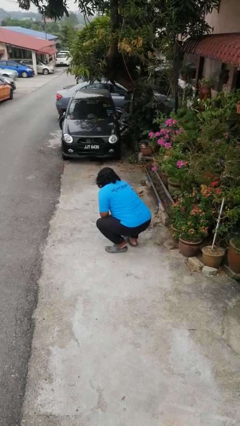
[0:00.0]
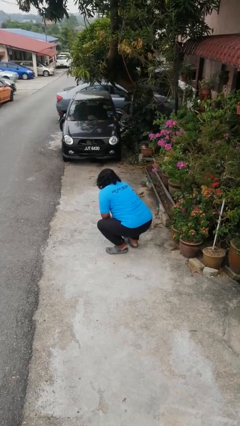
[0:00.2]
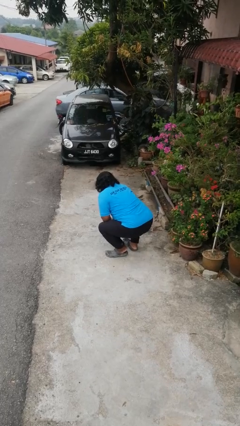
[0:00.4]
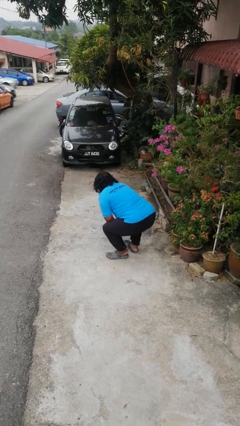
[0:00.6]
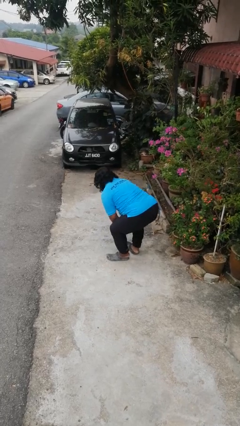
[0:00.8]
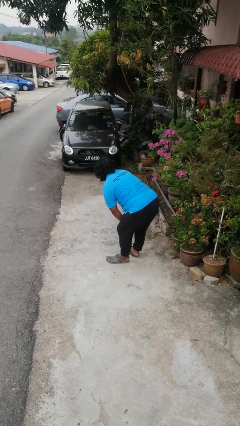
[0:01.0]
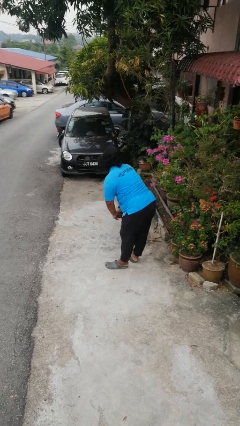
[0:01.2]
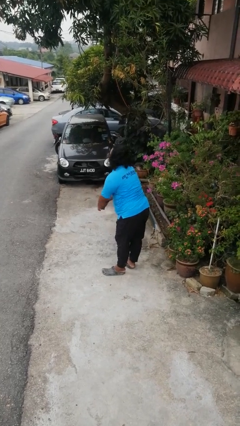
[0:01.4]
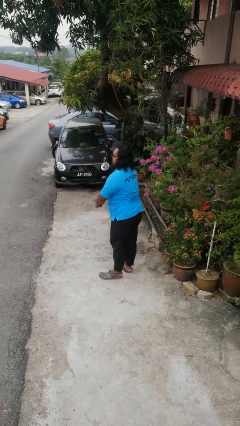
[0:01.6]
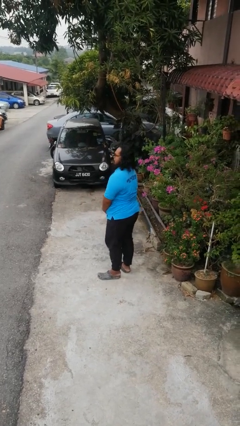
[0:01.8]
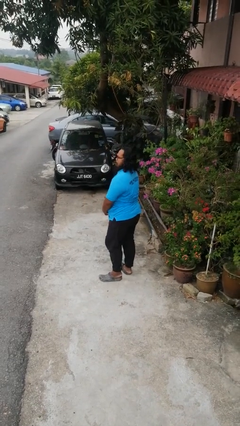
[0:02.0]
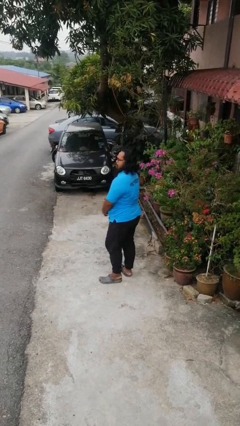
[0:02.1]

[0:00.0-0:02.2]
person stands up

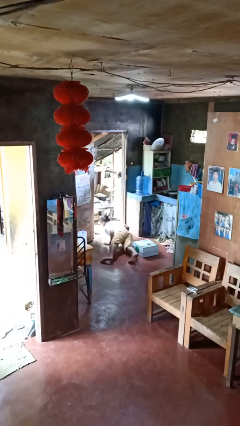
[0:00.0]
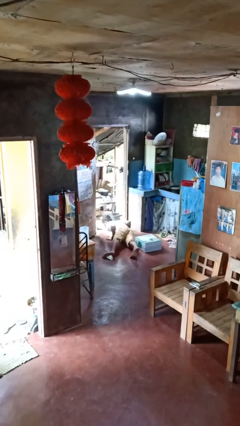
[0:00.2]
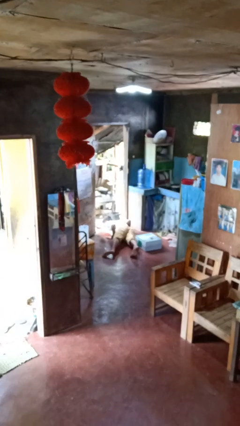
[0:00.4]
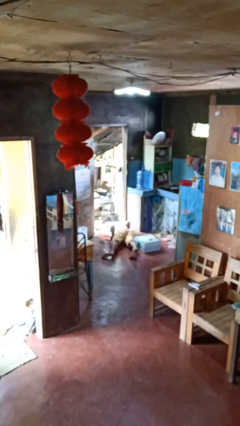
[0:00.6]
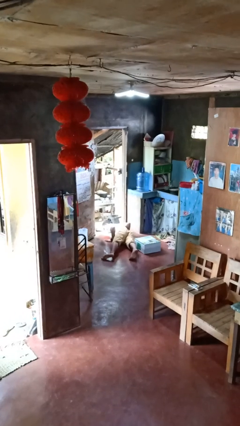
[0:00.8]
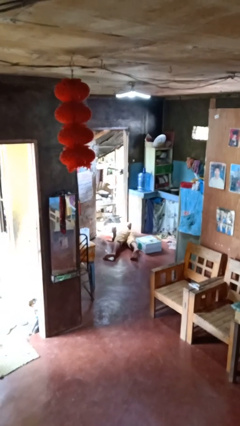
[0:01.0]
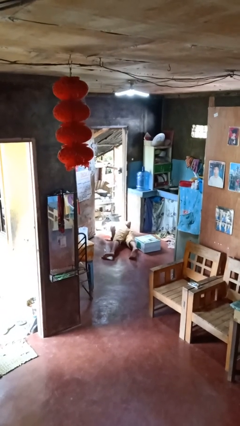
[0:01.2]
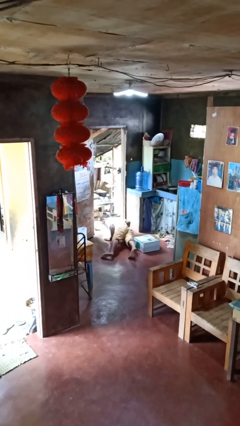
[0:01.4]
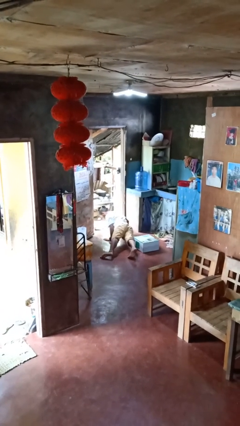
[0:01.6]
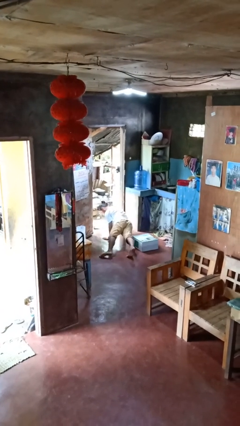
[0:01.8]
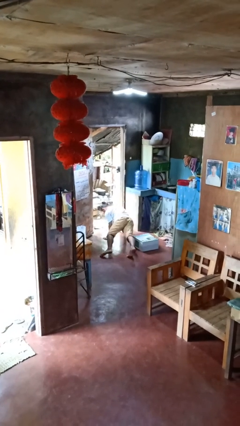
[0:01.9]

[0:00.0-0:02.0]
person lies down on floor

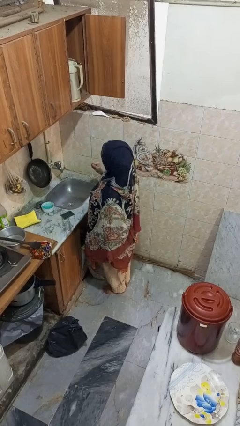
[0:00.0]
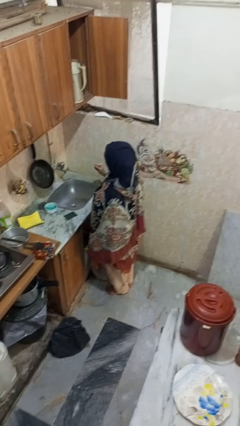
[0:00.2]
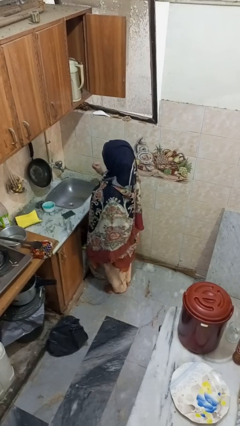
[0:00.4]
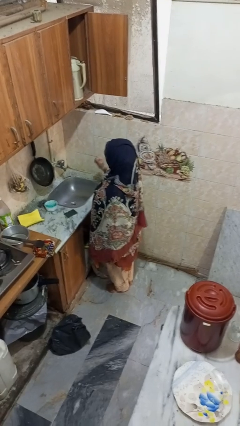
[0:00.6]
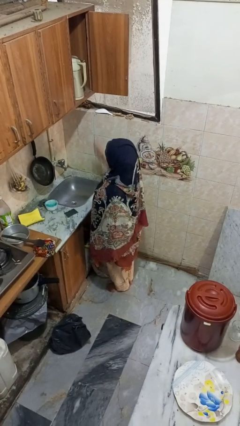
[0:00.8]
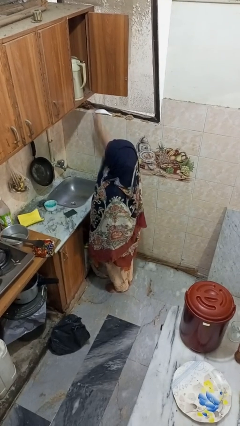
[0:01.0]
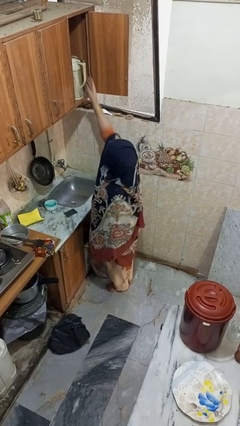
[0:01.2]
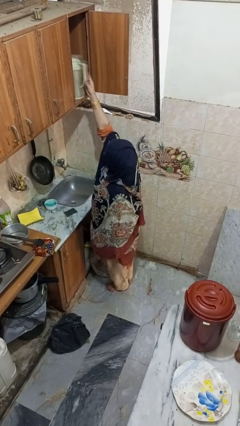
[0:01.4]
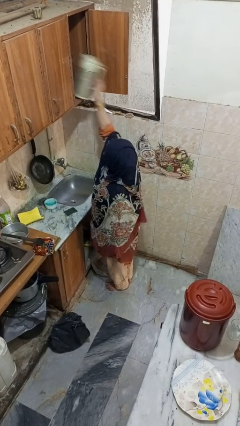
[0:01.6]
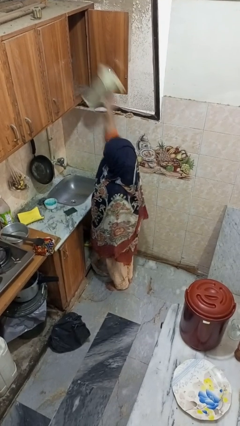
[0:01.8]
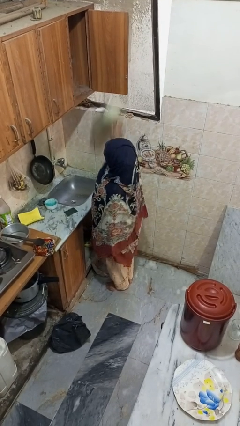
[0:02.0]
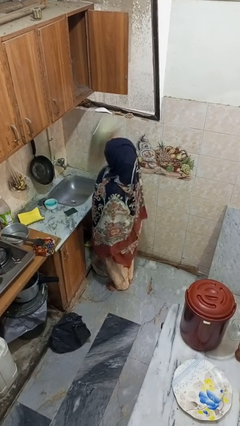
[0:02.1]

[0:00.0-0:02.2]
person puts object in cabinet

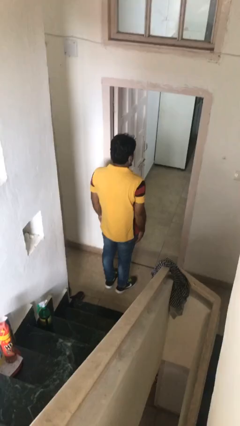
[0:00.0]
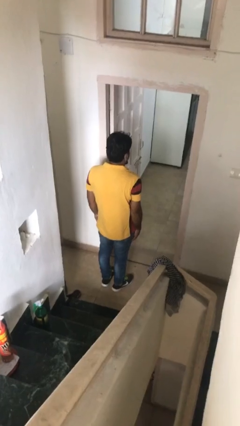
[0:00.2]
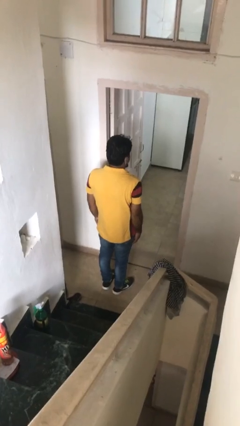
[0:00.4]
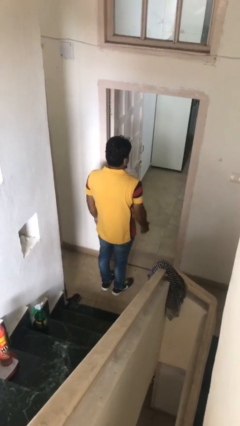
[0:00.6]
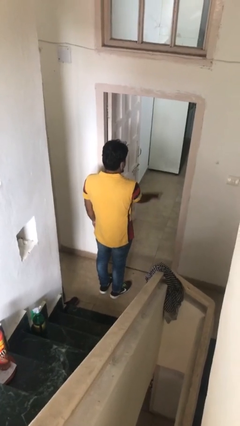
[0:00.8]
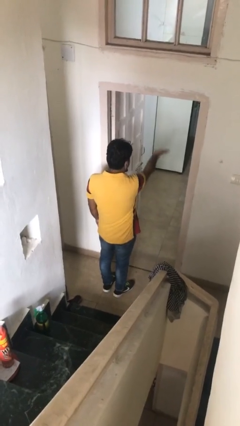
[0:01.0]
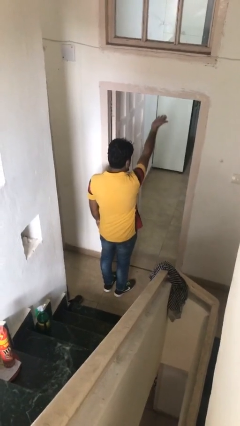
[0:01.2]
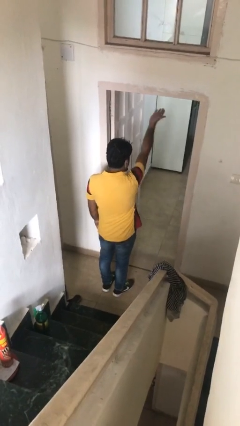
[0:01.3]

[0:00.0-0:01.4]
person gestures swipe up

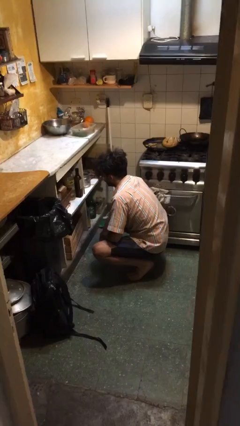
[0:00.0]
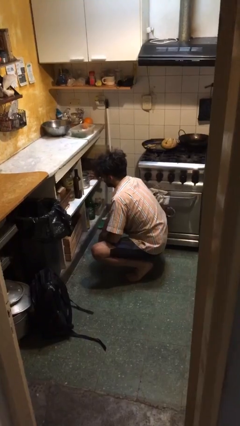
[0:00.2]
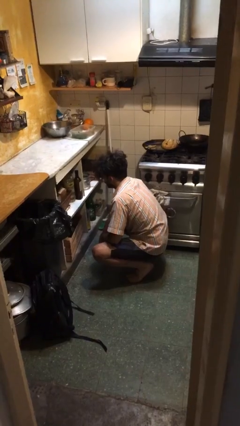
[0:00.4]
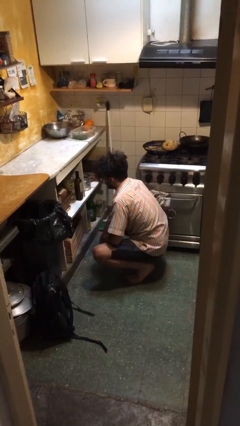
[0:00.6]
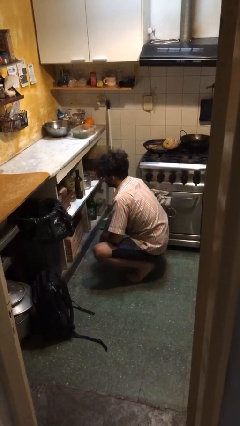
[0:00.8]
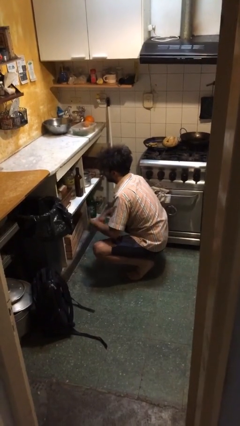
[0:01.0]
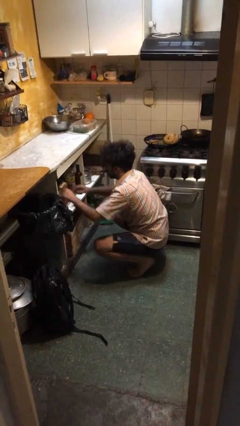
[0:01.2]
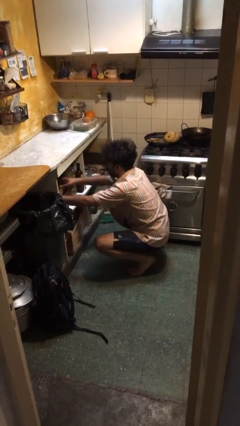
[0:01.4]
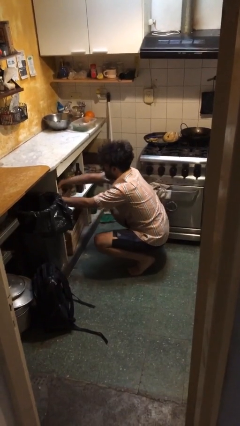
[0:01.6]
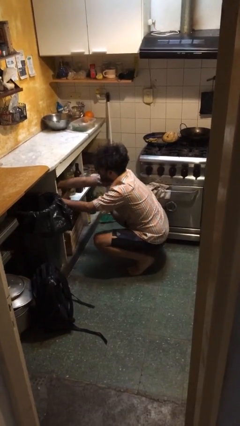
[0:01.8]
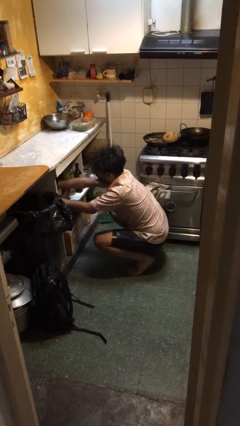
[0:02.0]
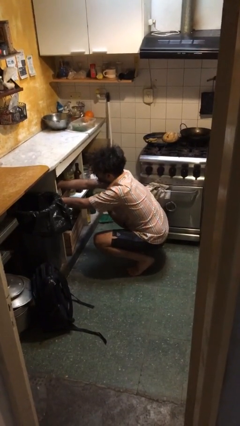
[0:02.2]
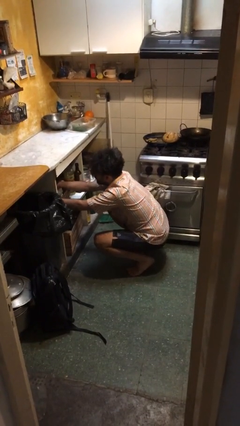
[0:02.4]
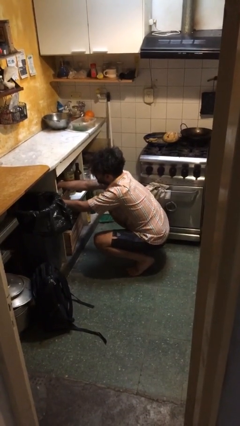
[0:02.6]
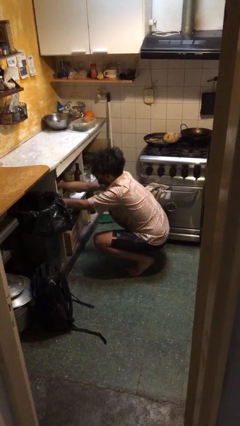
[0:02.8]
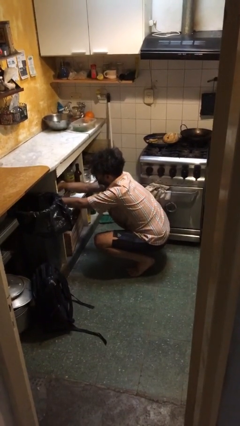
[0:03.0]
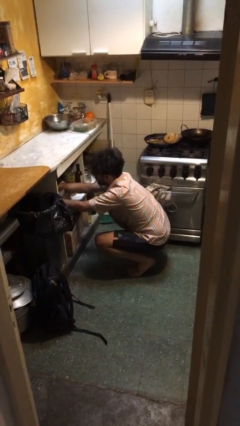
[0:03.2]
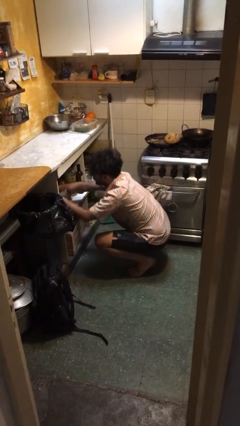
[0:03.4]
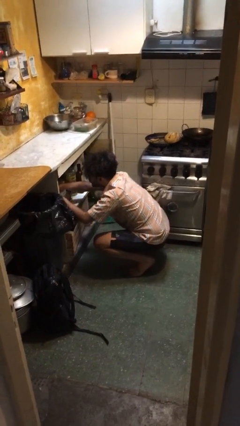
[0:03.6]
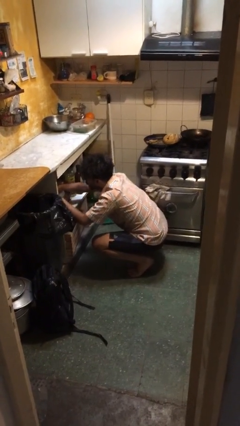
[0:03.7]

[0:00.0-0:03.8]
person searches in cabinet

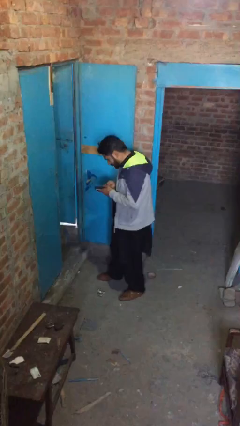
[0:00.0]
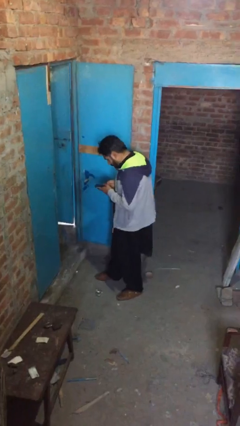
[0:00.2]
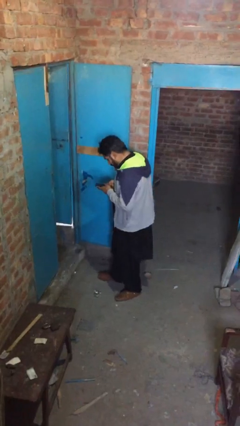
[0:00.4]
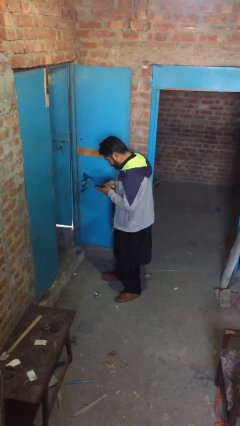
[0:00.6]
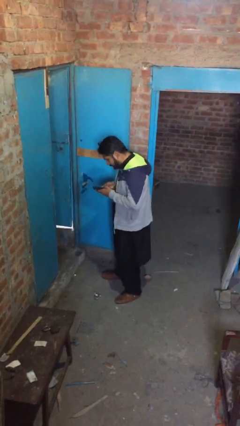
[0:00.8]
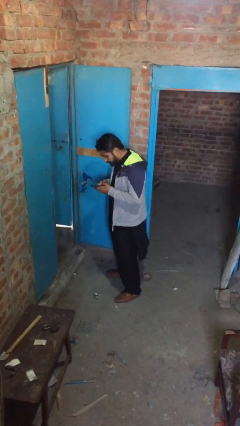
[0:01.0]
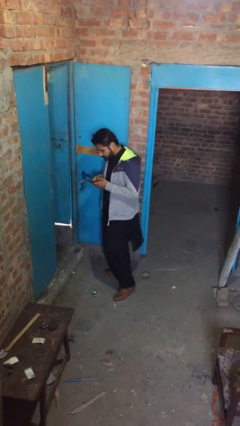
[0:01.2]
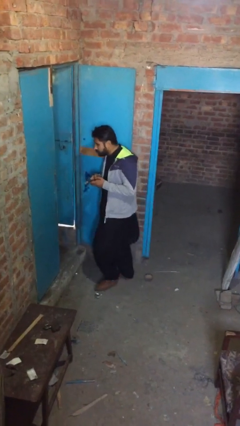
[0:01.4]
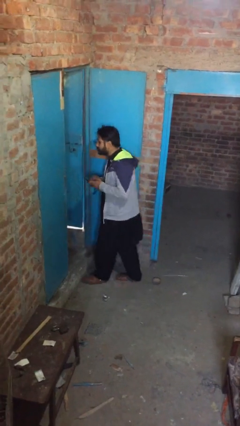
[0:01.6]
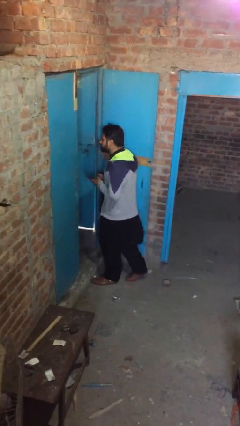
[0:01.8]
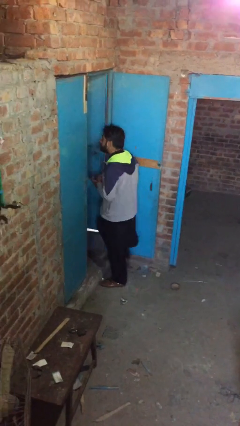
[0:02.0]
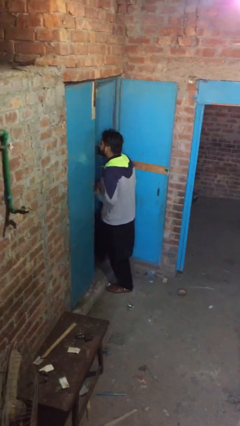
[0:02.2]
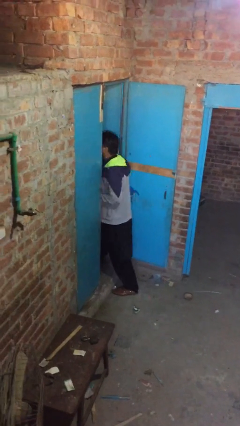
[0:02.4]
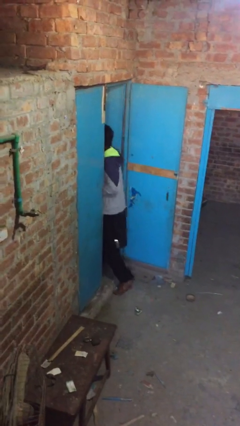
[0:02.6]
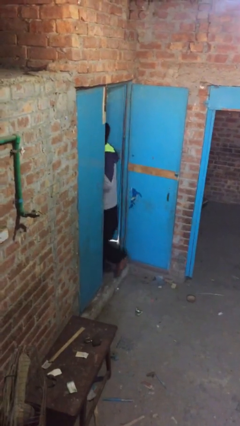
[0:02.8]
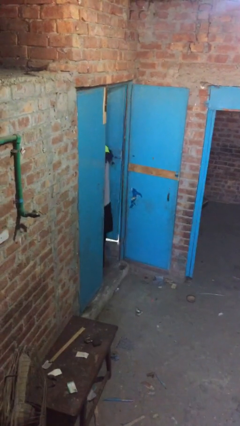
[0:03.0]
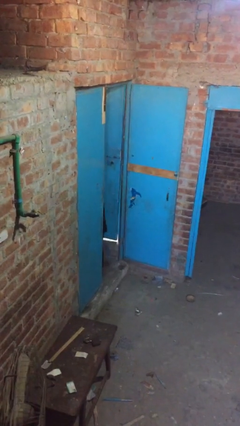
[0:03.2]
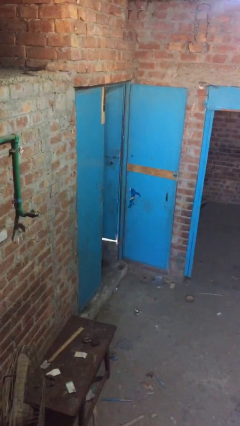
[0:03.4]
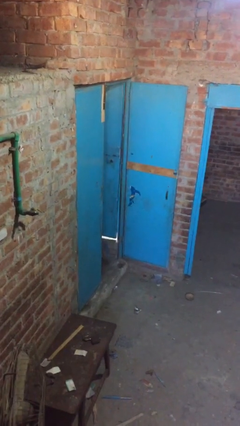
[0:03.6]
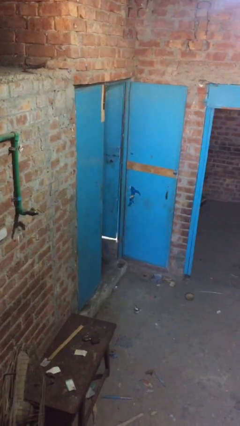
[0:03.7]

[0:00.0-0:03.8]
person exits scene through structure

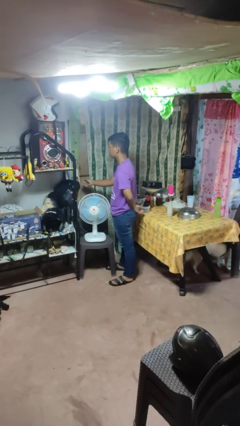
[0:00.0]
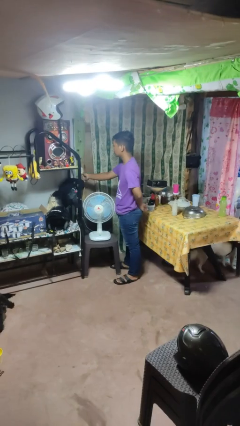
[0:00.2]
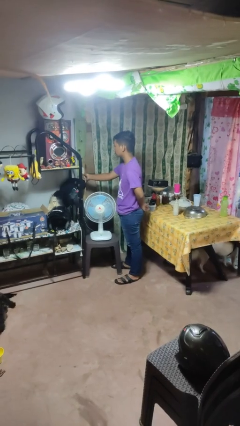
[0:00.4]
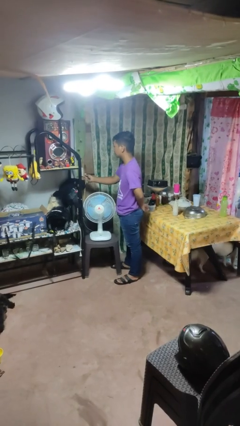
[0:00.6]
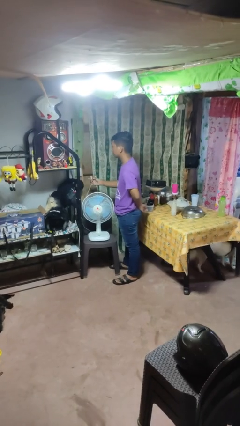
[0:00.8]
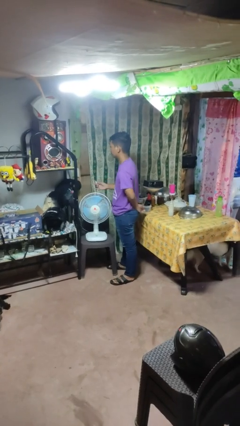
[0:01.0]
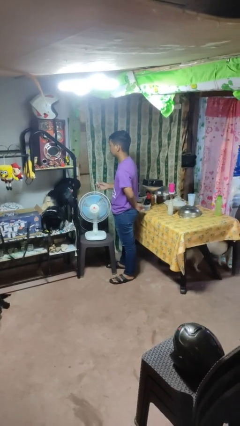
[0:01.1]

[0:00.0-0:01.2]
person unplugs from electrical socket

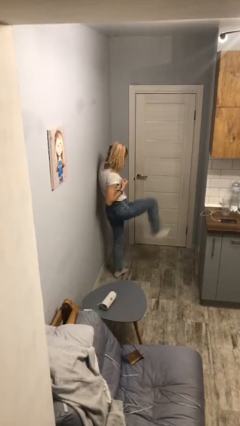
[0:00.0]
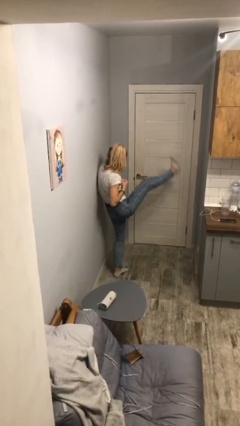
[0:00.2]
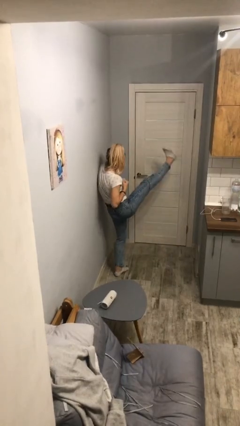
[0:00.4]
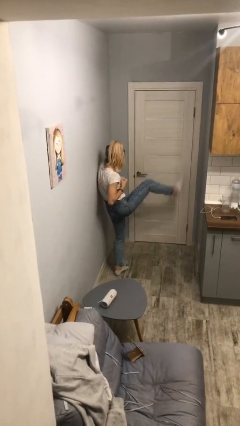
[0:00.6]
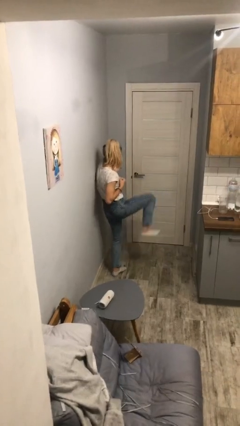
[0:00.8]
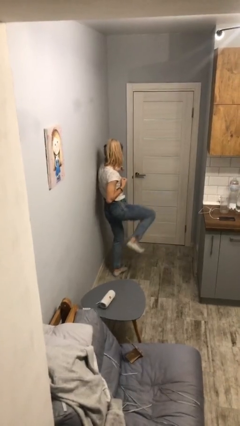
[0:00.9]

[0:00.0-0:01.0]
person karate kicks
